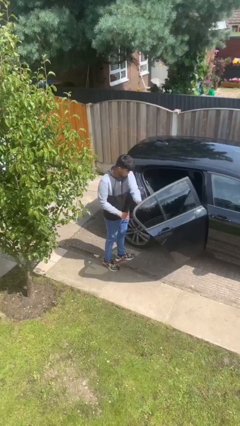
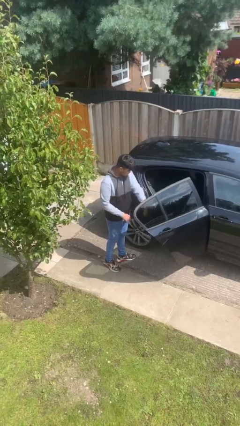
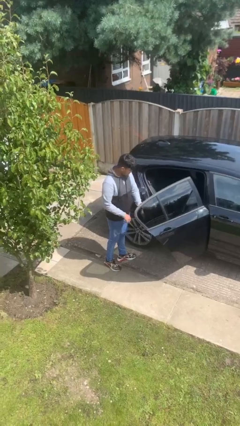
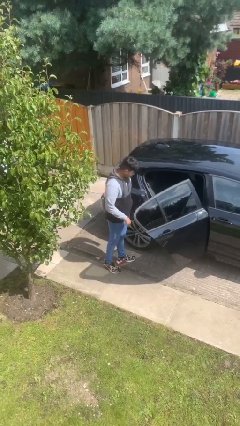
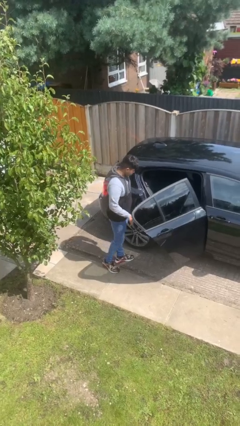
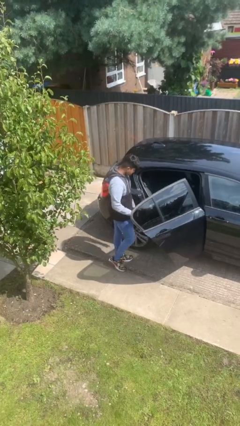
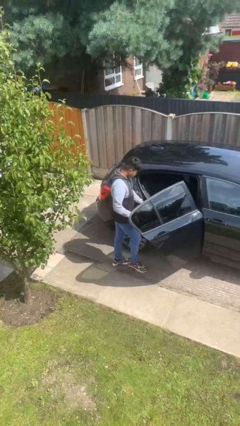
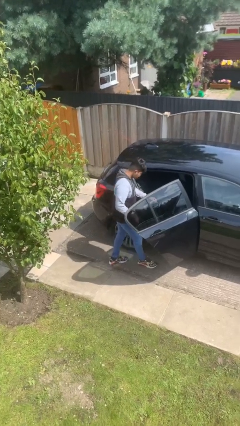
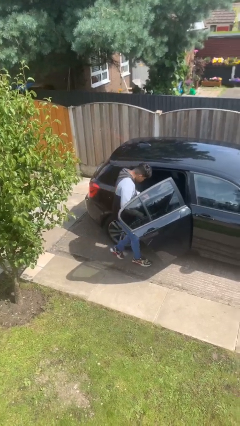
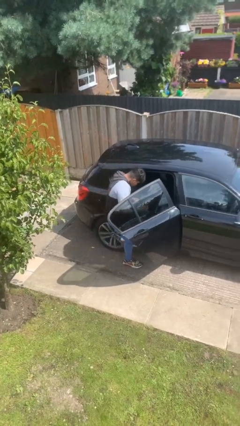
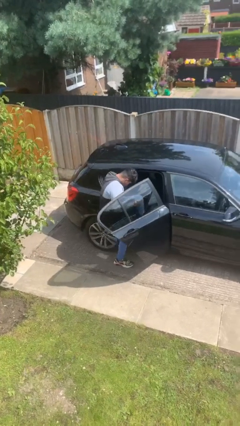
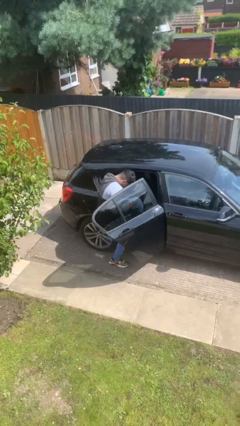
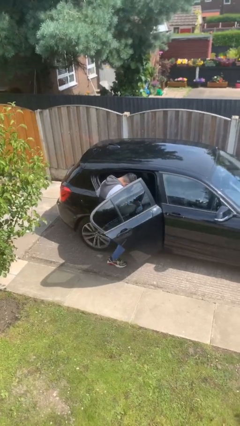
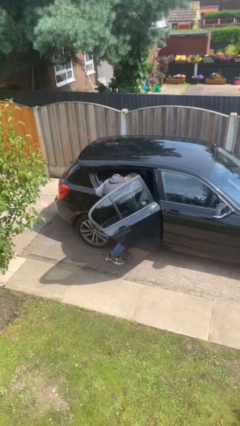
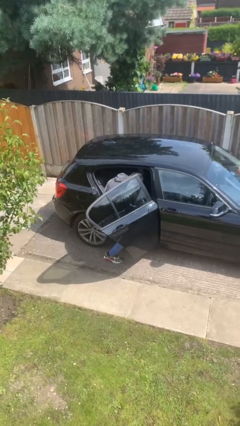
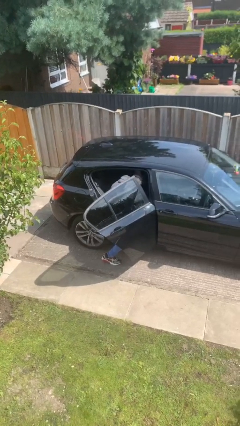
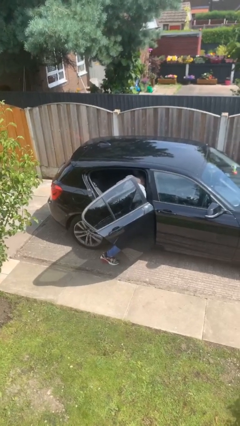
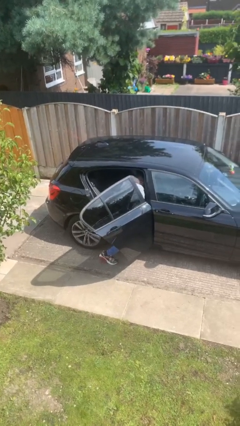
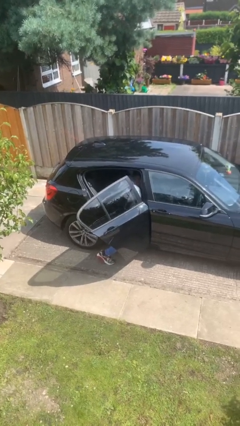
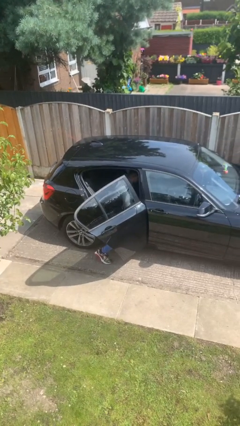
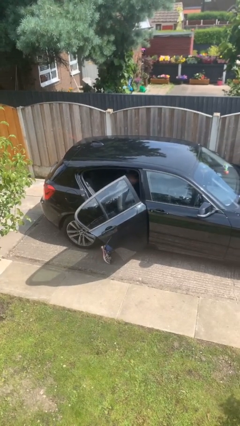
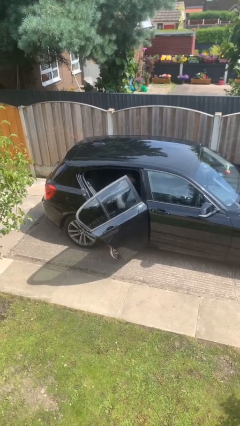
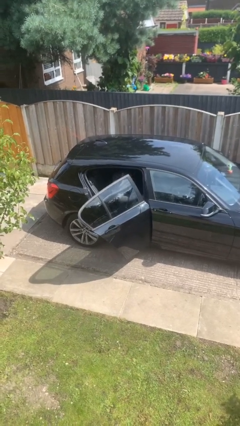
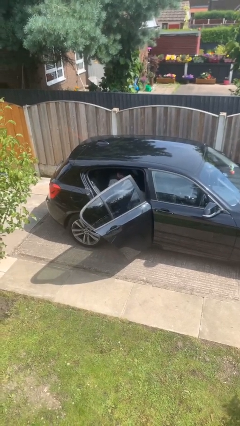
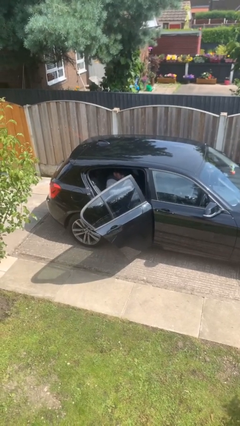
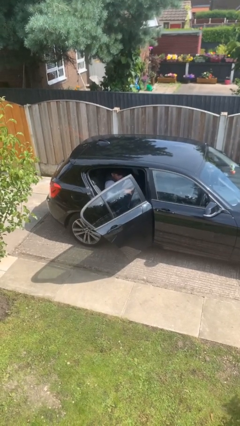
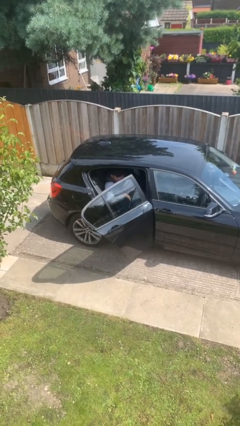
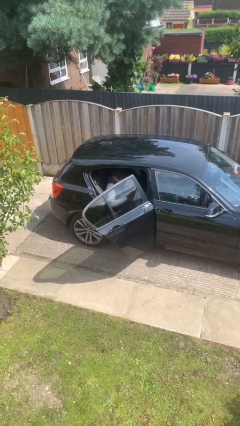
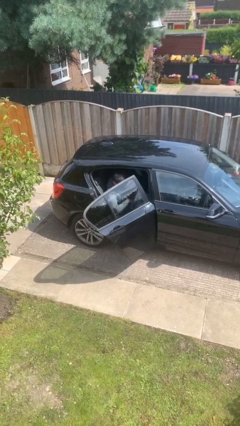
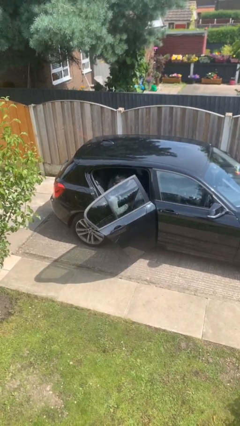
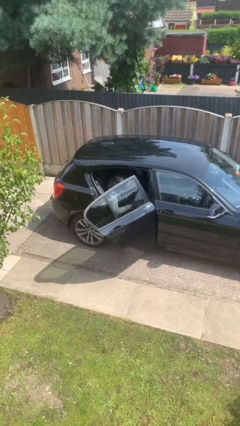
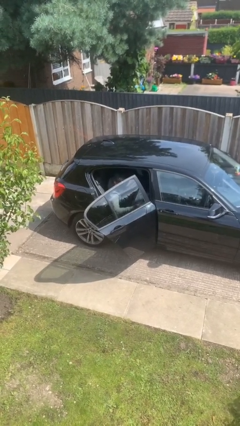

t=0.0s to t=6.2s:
person enters car

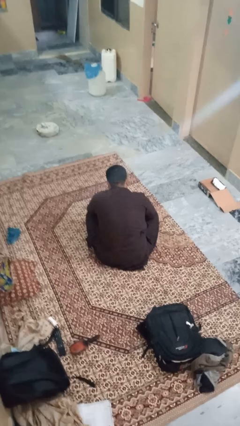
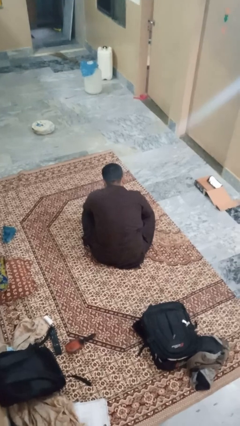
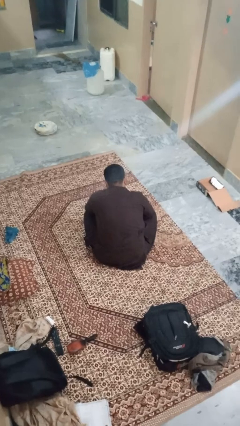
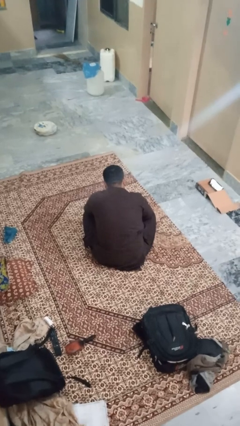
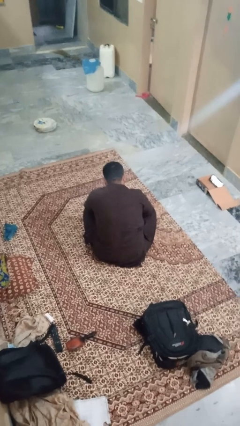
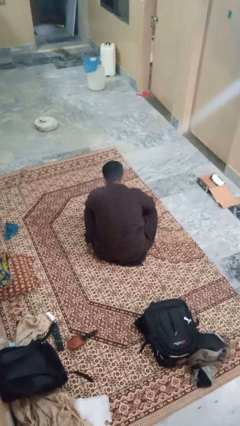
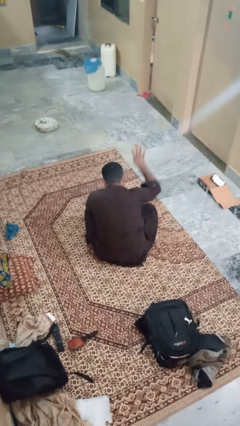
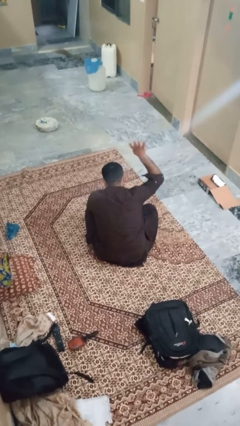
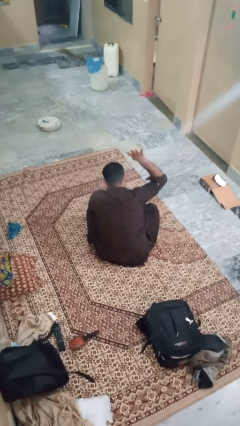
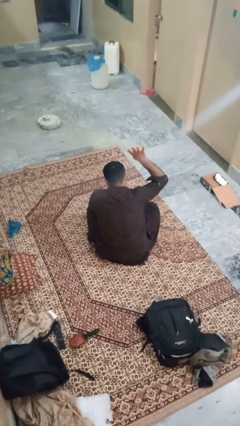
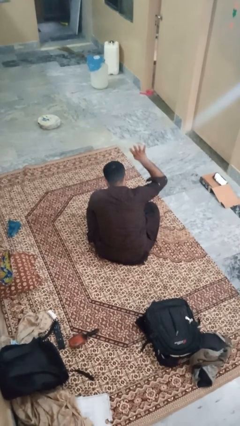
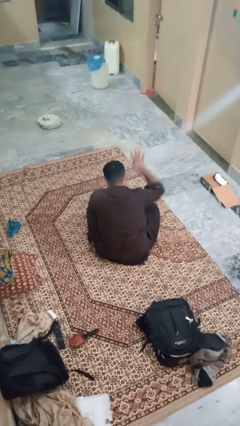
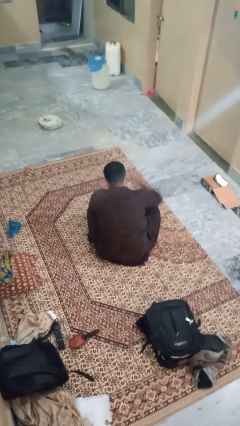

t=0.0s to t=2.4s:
person gestures number four

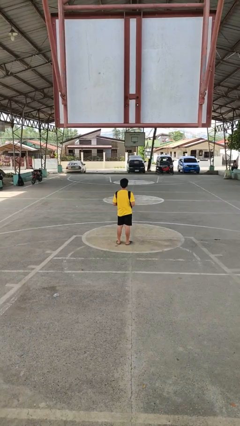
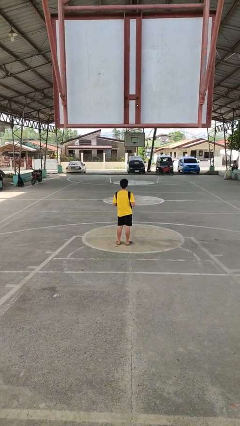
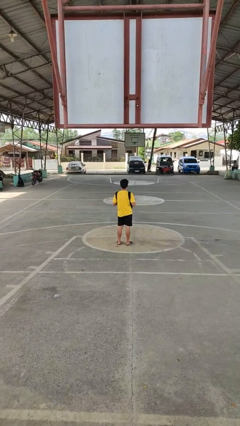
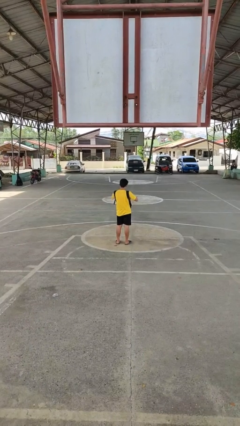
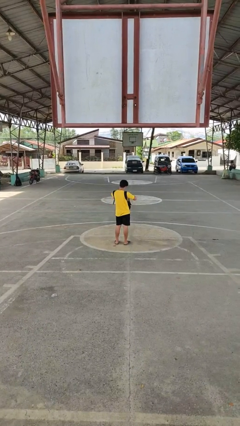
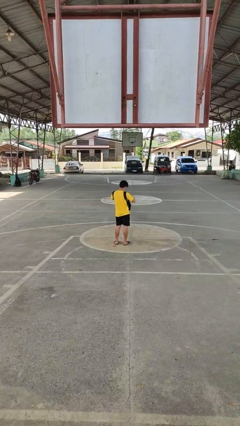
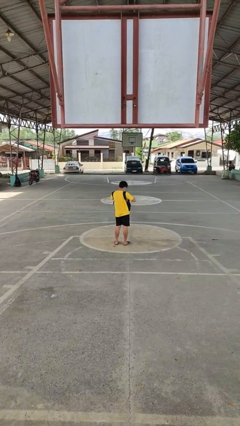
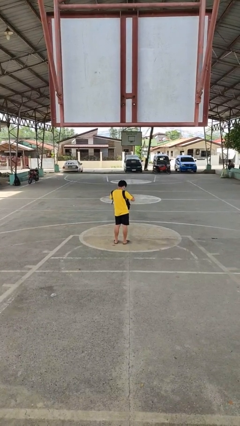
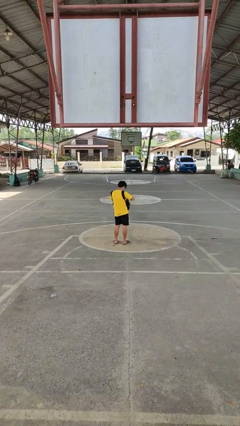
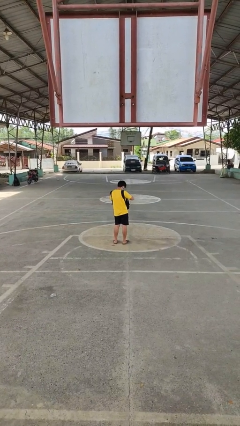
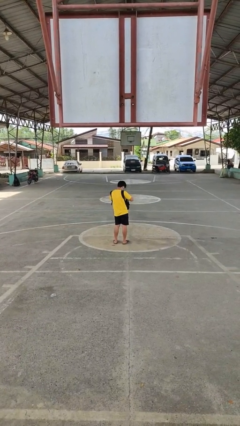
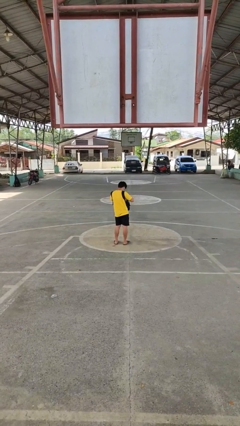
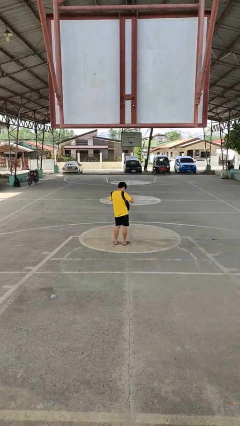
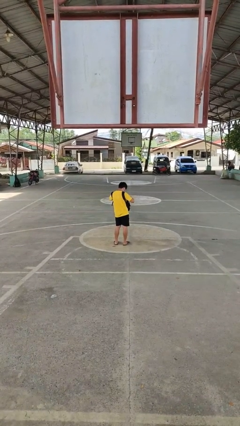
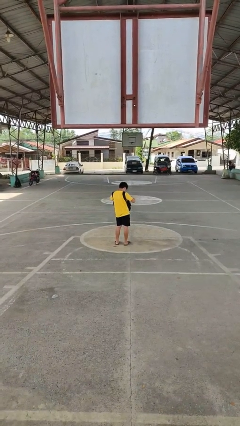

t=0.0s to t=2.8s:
person searches in backpack

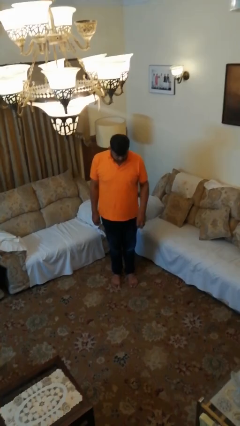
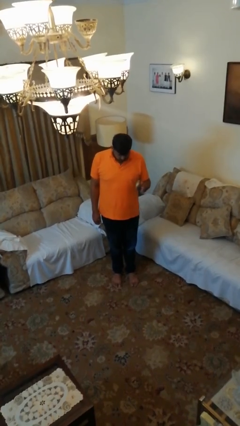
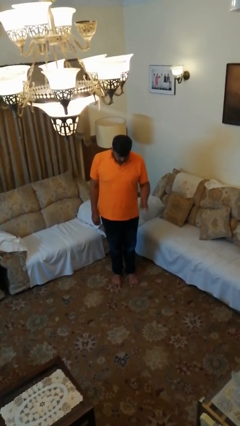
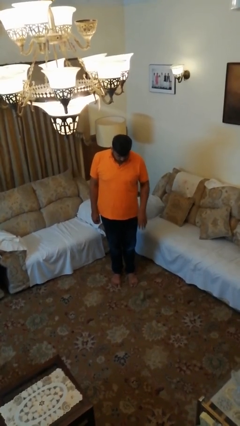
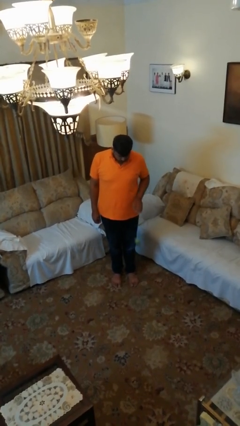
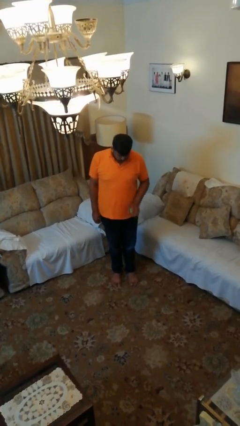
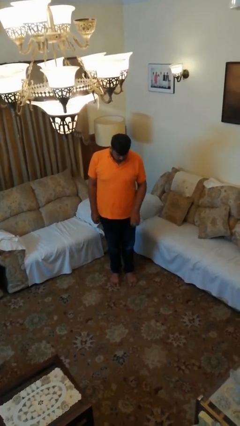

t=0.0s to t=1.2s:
person bounces ball on floor

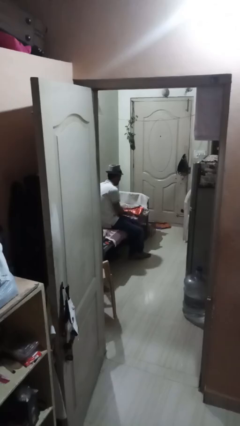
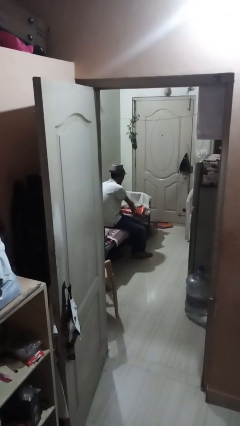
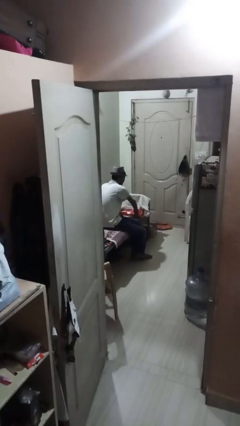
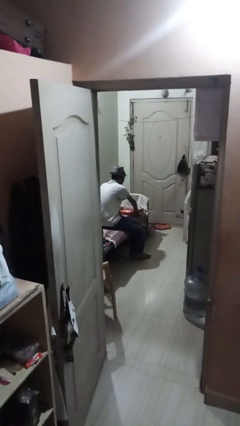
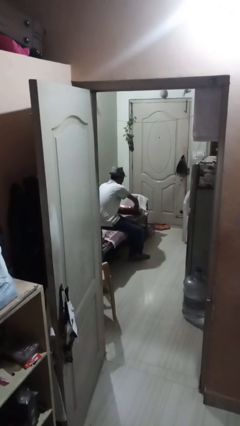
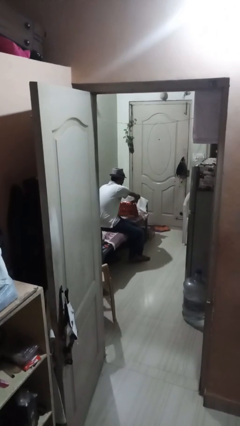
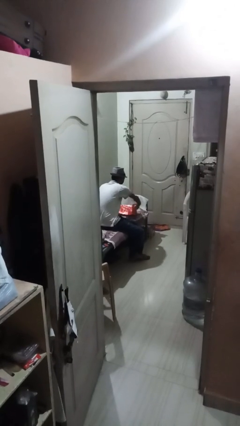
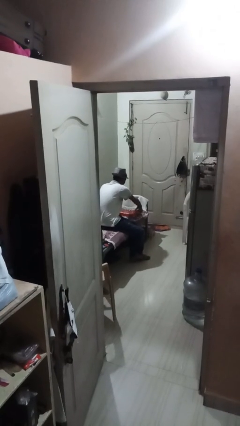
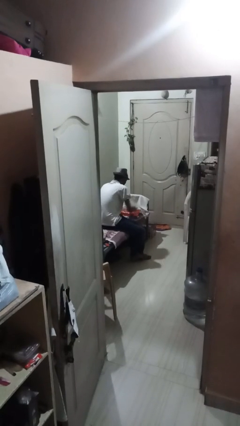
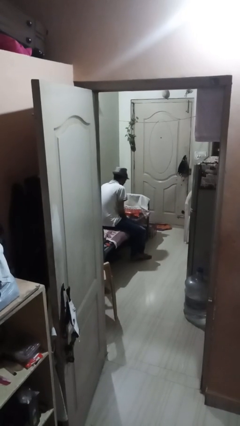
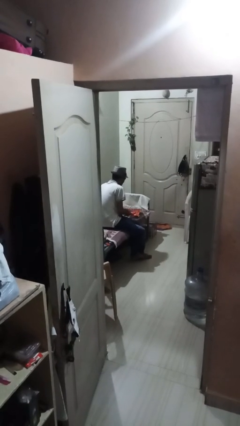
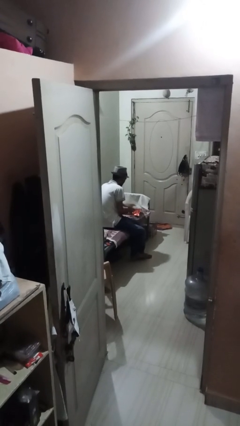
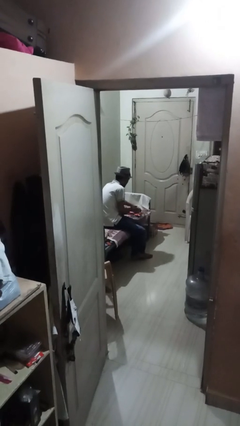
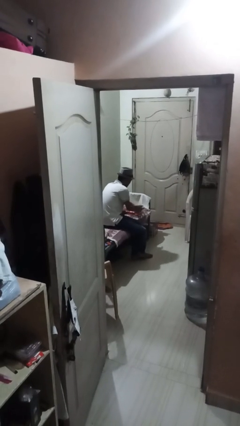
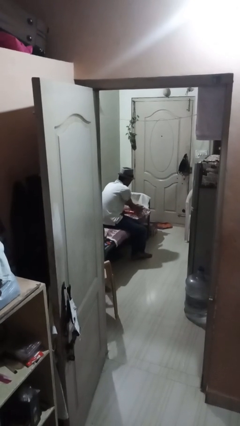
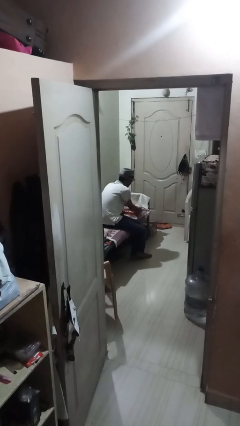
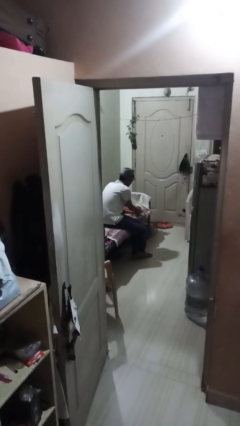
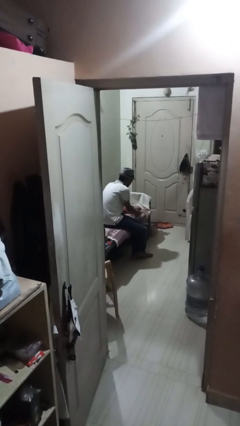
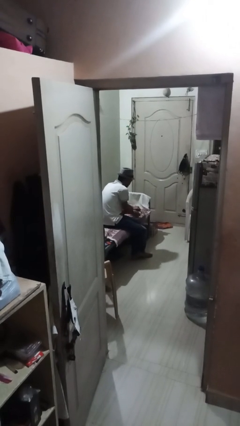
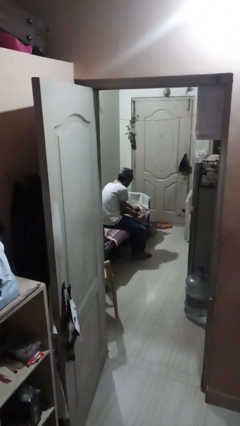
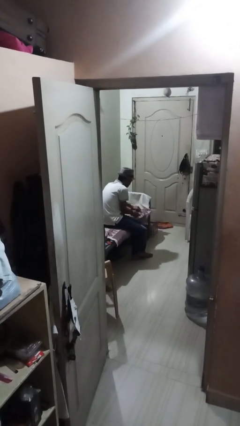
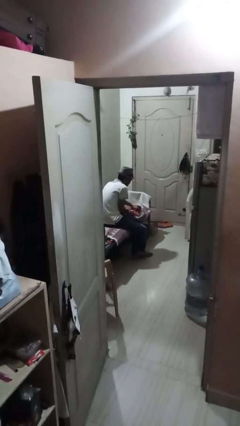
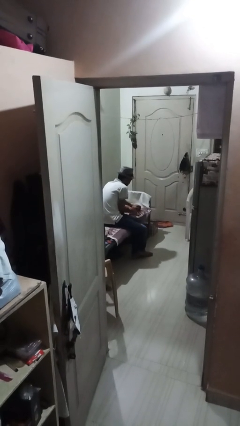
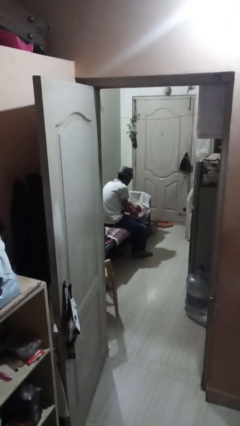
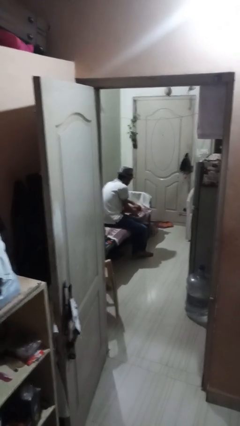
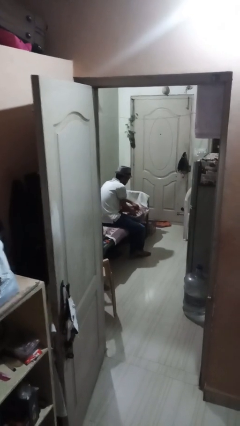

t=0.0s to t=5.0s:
person wraps box
